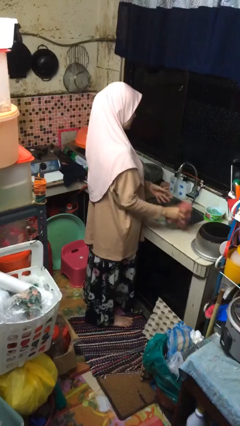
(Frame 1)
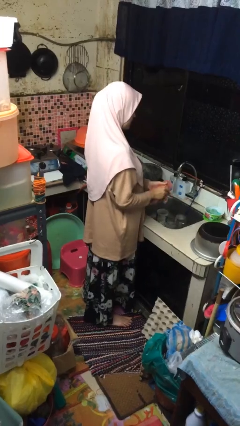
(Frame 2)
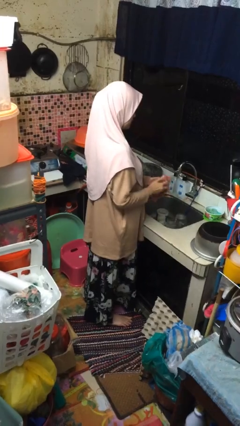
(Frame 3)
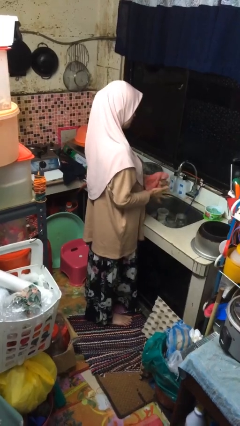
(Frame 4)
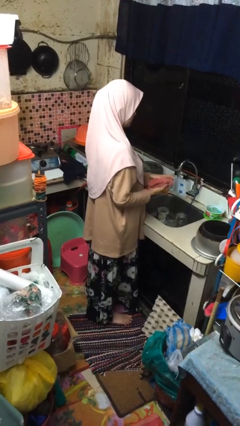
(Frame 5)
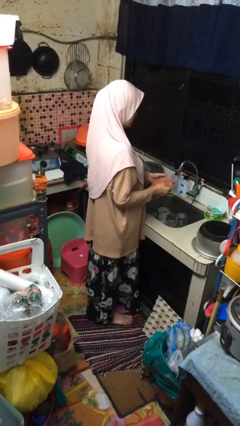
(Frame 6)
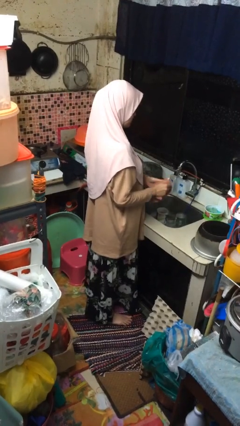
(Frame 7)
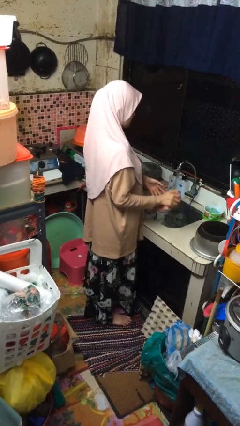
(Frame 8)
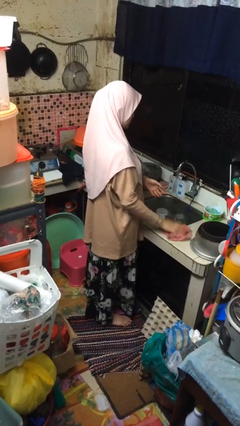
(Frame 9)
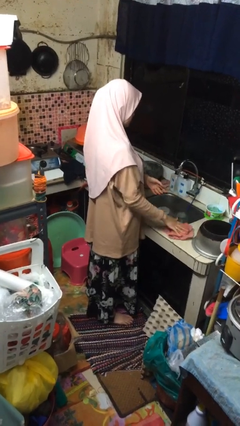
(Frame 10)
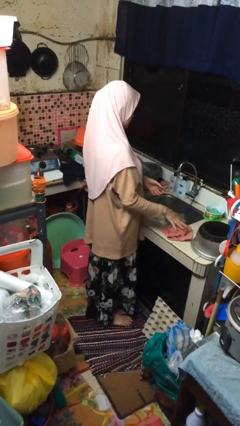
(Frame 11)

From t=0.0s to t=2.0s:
person dries hands with towel

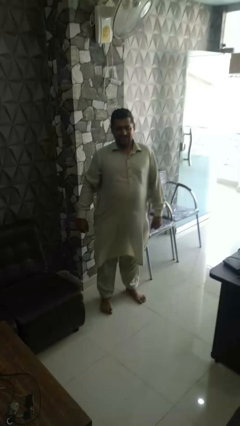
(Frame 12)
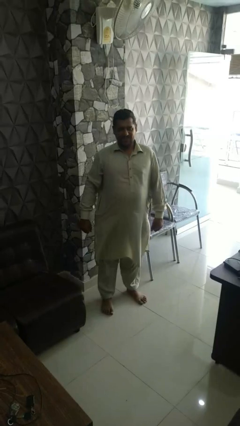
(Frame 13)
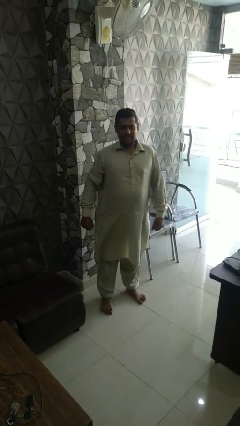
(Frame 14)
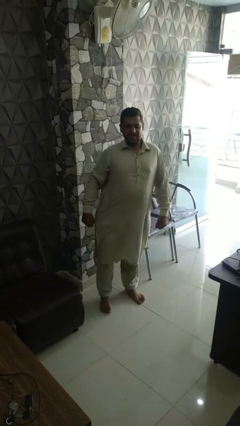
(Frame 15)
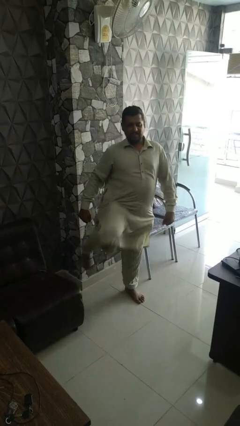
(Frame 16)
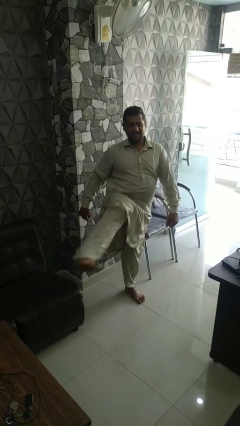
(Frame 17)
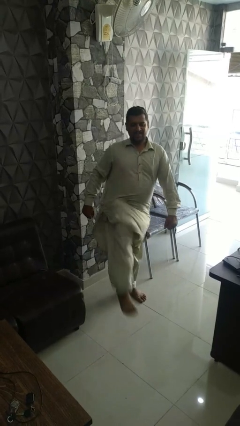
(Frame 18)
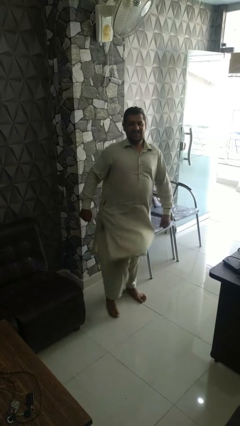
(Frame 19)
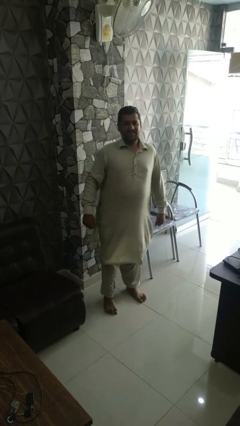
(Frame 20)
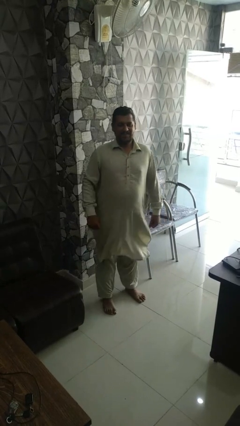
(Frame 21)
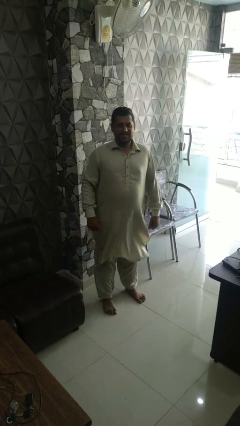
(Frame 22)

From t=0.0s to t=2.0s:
person karate kicks

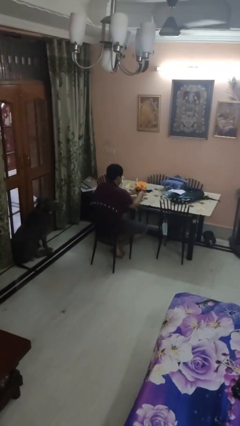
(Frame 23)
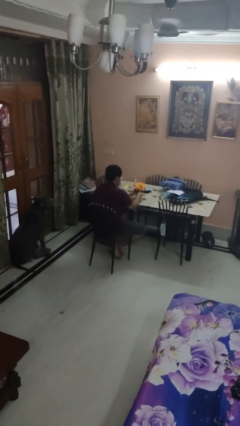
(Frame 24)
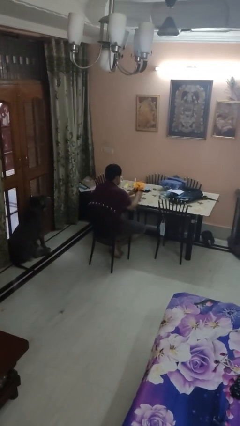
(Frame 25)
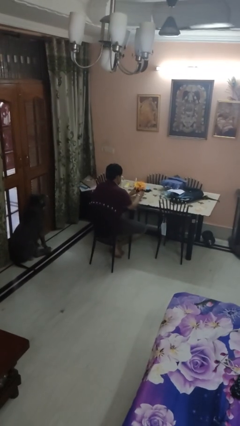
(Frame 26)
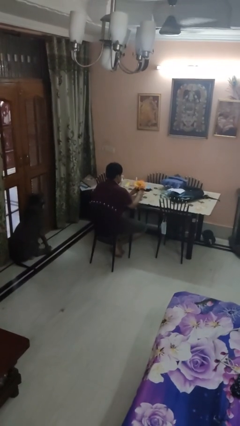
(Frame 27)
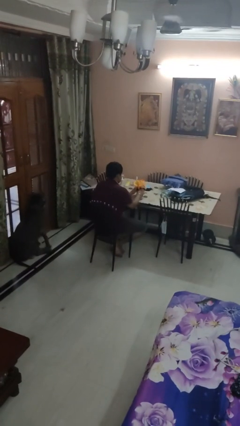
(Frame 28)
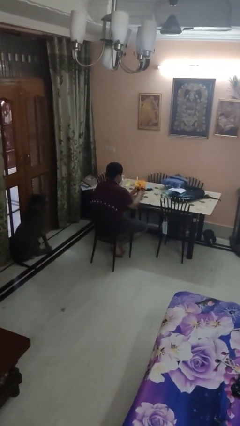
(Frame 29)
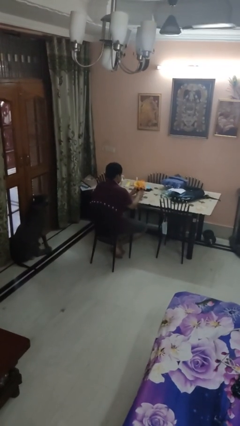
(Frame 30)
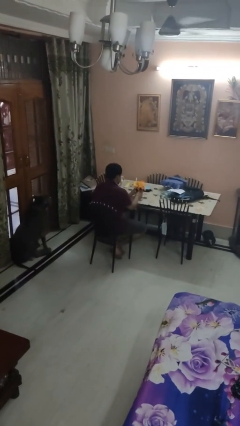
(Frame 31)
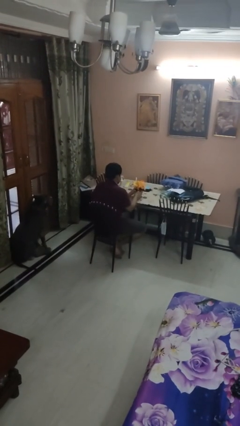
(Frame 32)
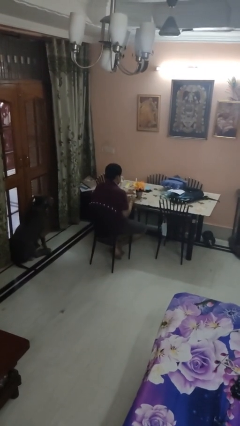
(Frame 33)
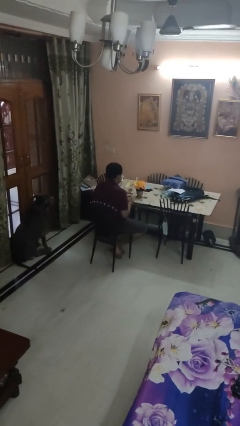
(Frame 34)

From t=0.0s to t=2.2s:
person arranges flowers in vase

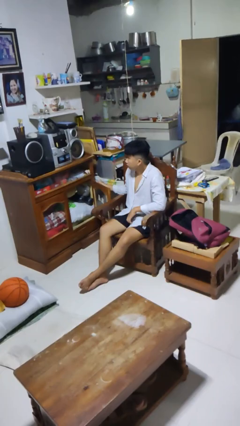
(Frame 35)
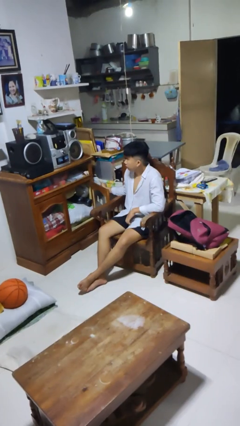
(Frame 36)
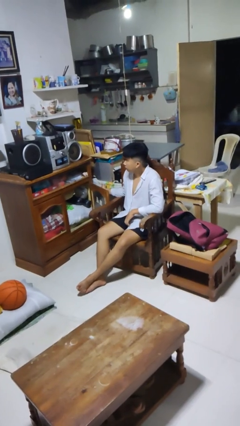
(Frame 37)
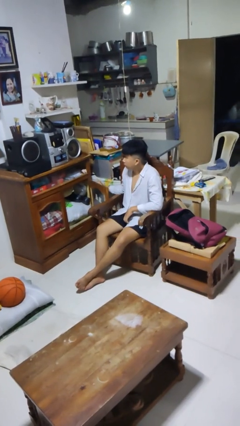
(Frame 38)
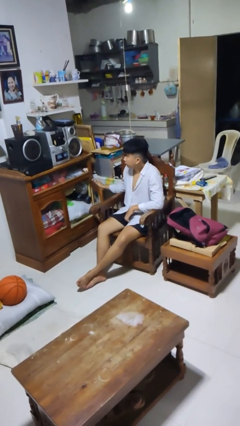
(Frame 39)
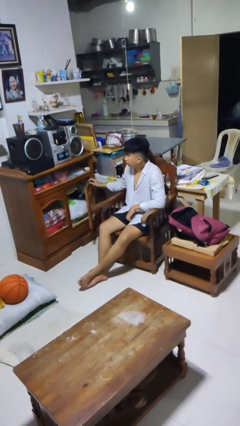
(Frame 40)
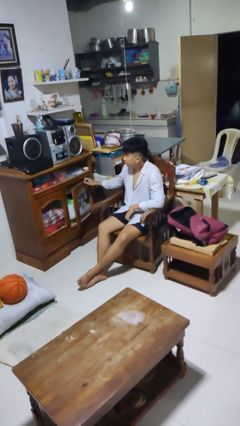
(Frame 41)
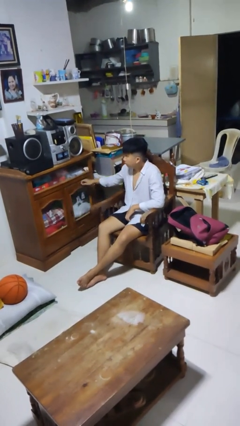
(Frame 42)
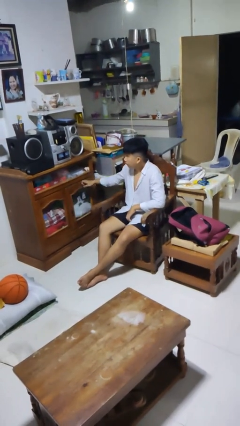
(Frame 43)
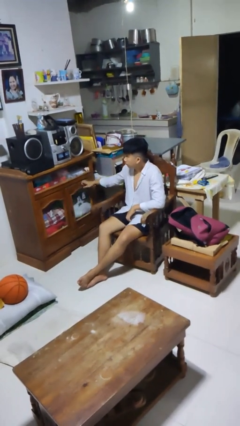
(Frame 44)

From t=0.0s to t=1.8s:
person closes dresser drawer

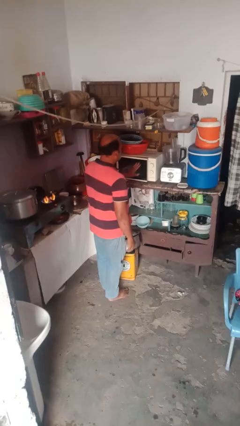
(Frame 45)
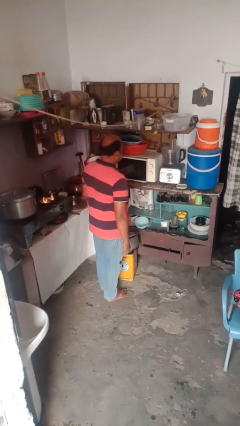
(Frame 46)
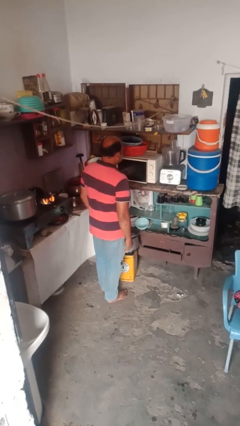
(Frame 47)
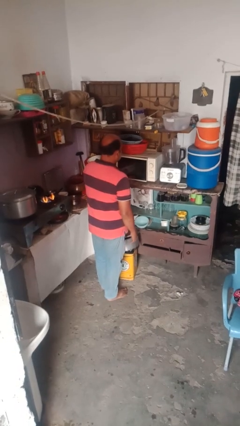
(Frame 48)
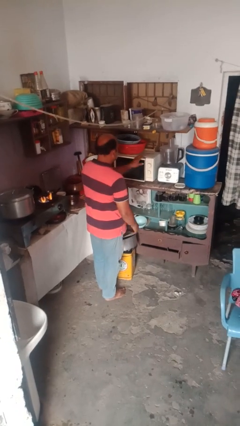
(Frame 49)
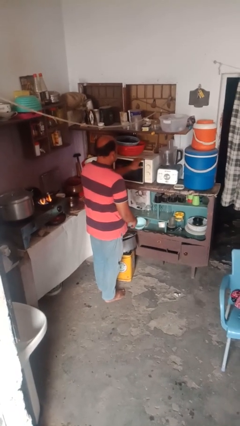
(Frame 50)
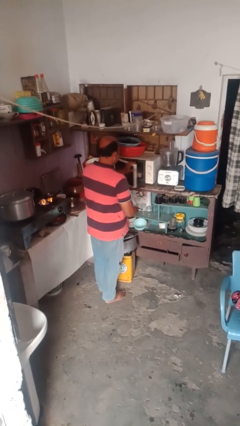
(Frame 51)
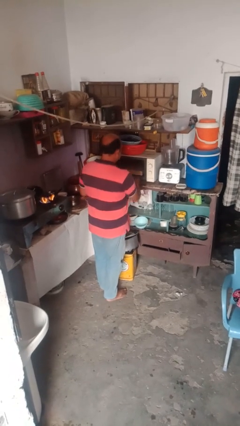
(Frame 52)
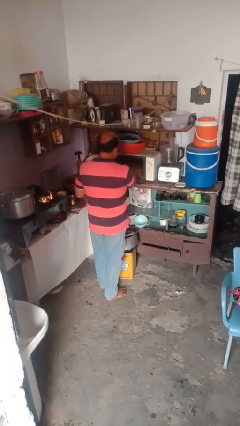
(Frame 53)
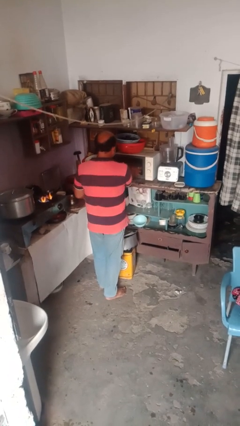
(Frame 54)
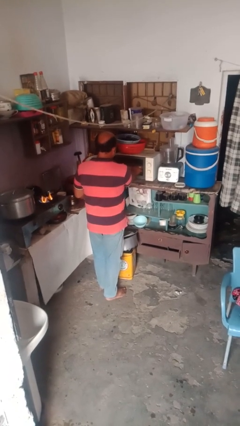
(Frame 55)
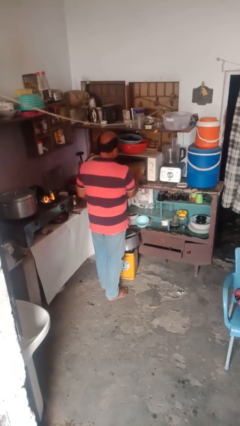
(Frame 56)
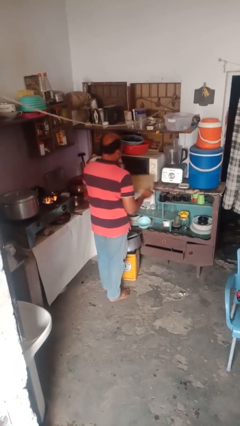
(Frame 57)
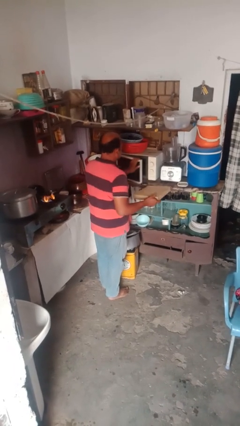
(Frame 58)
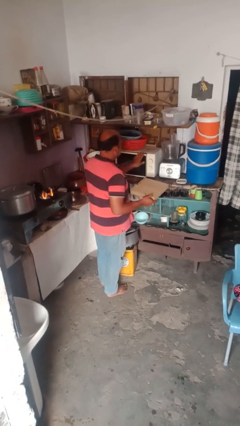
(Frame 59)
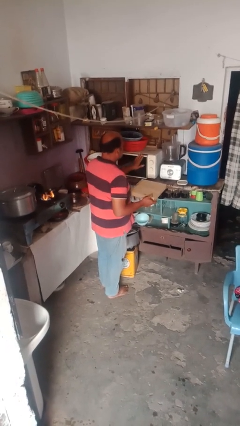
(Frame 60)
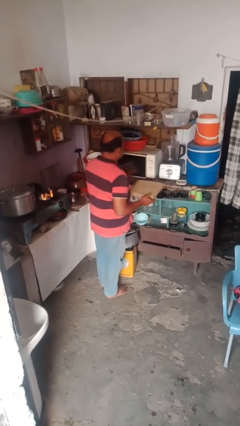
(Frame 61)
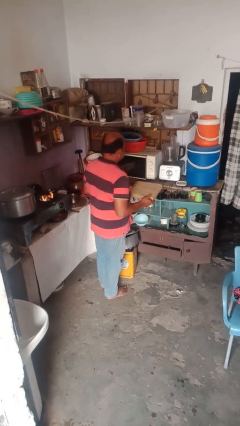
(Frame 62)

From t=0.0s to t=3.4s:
person takes object from microwave

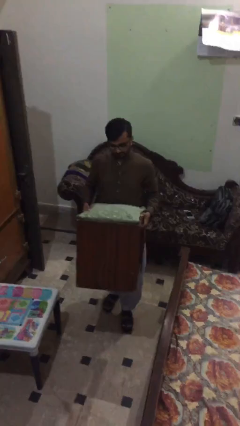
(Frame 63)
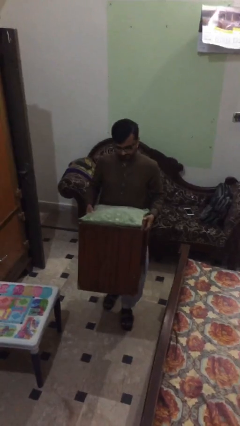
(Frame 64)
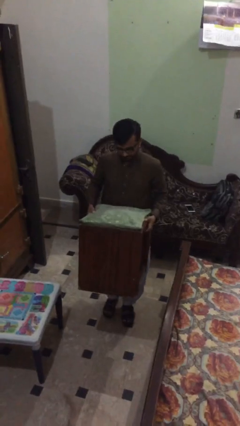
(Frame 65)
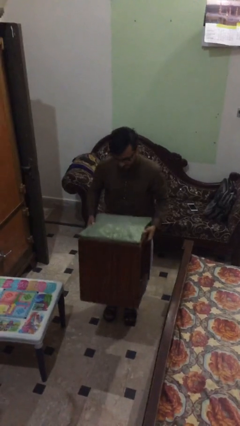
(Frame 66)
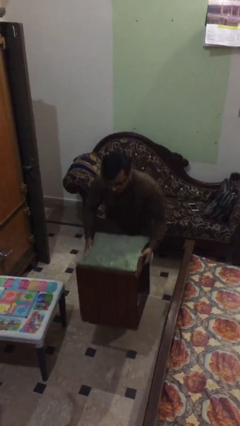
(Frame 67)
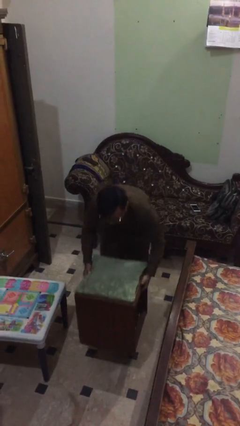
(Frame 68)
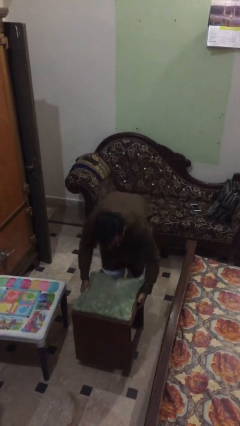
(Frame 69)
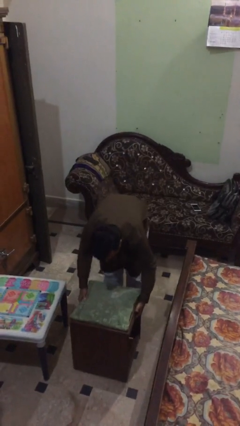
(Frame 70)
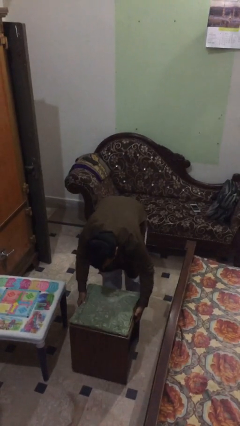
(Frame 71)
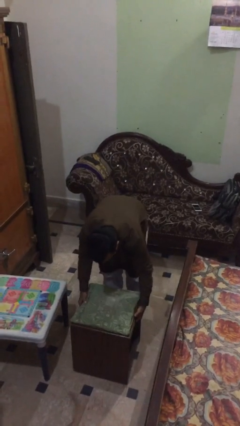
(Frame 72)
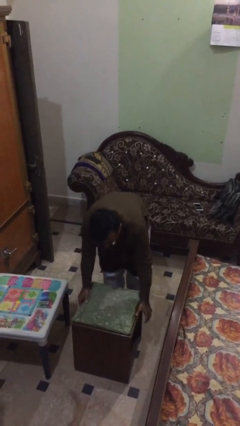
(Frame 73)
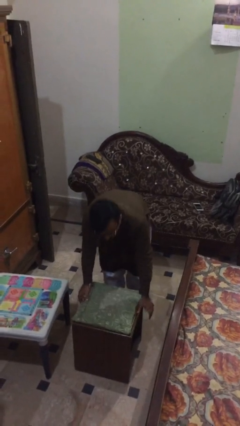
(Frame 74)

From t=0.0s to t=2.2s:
person puts down object on floor

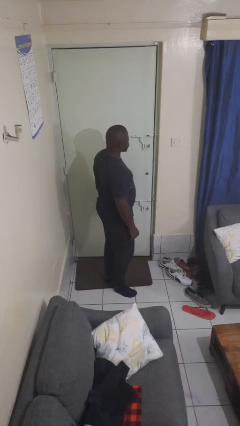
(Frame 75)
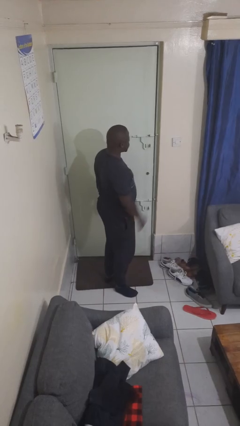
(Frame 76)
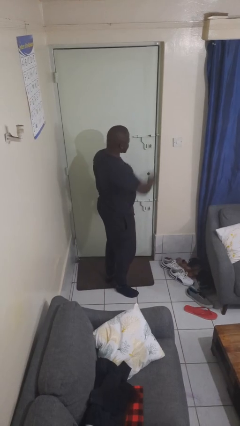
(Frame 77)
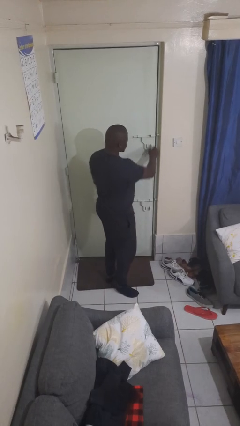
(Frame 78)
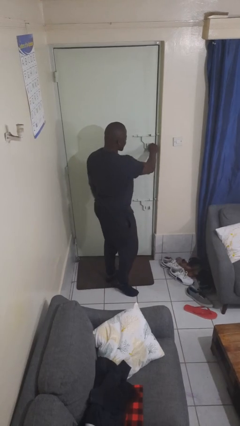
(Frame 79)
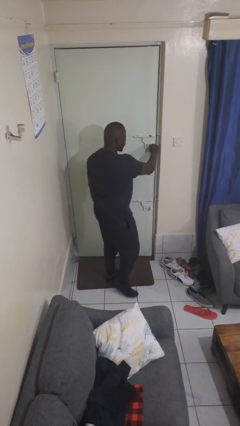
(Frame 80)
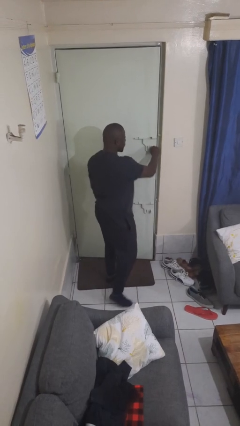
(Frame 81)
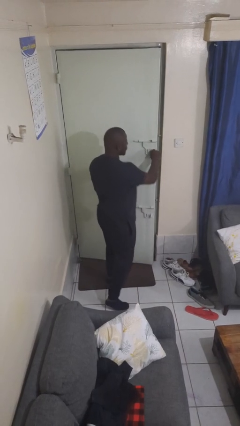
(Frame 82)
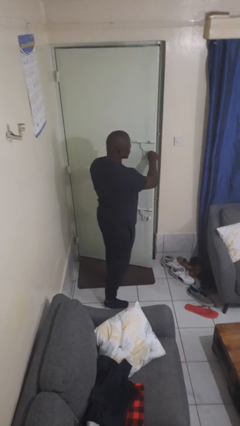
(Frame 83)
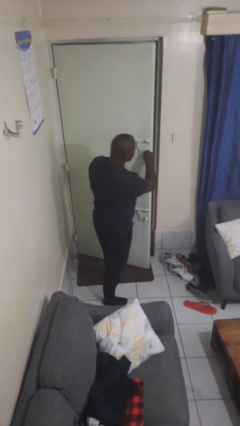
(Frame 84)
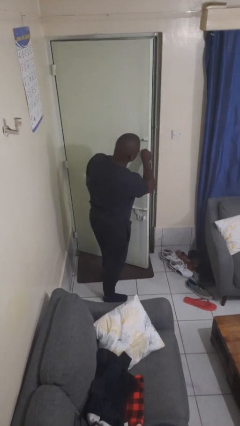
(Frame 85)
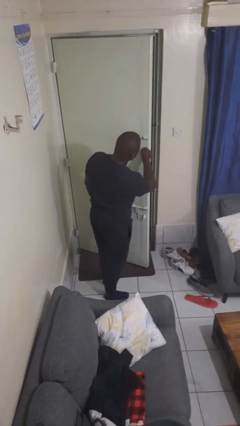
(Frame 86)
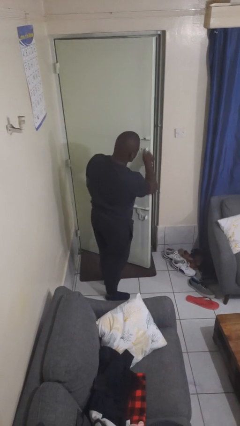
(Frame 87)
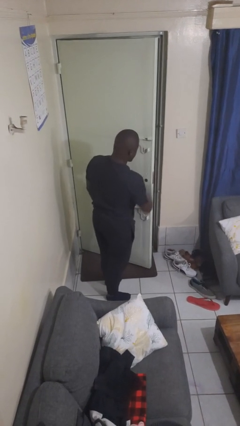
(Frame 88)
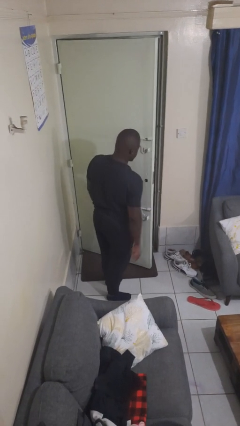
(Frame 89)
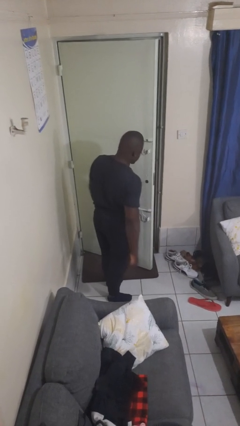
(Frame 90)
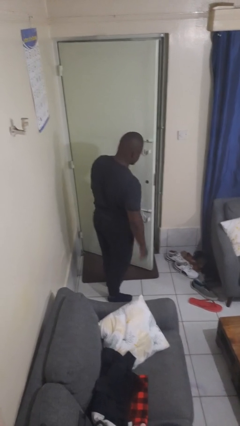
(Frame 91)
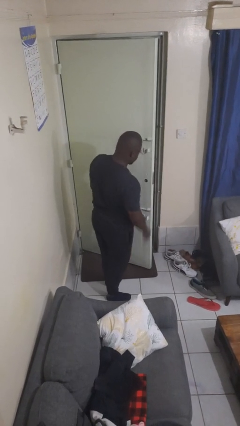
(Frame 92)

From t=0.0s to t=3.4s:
person opens facility door
